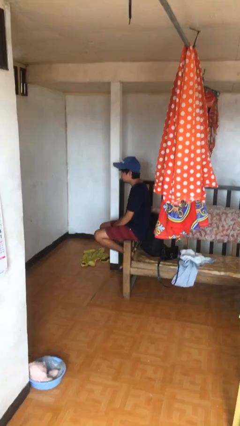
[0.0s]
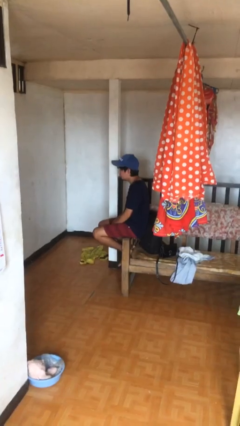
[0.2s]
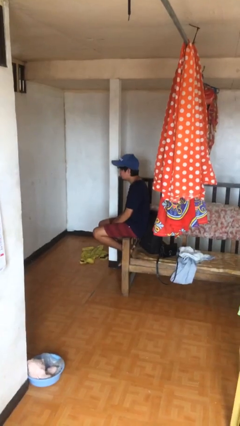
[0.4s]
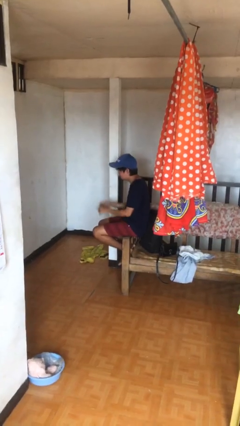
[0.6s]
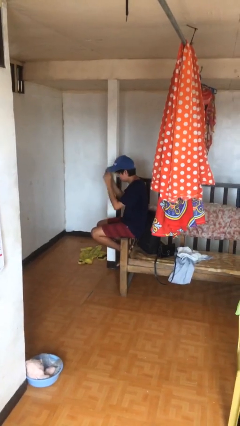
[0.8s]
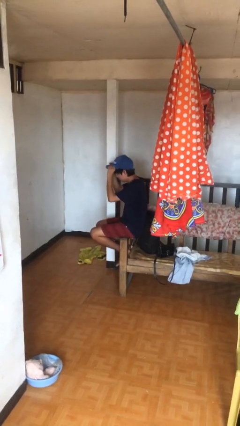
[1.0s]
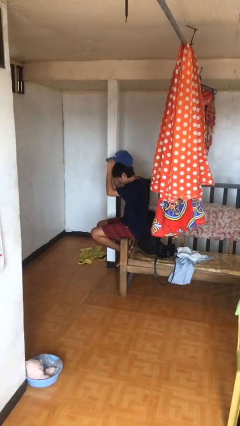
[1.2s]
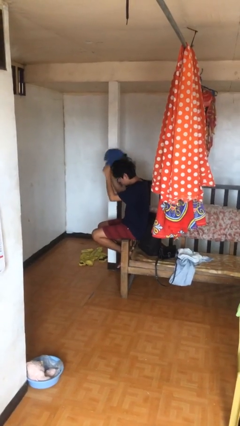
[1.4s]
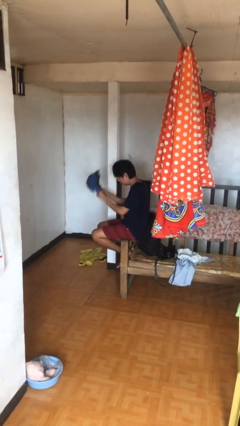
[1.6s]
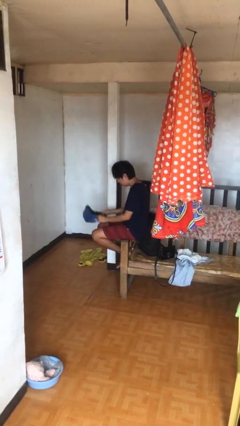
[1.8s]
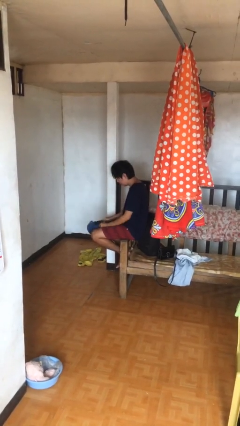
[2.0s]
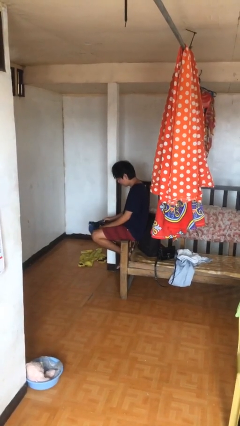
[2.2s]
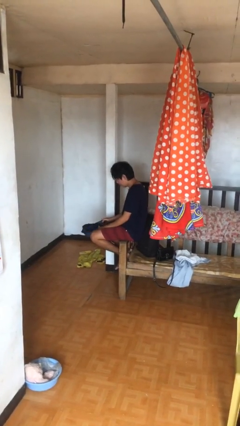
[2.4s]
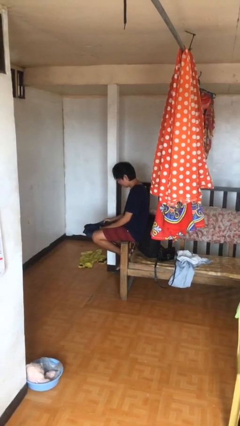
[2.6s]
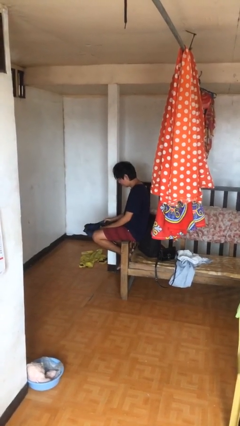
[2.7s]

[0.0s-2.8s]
person takes off hat

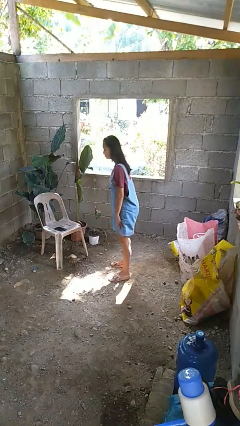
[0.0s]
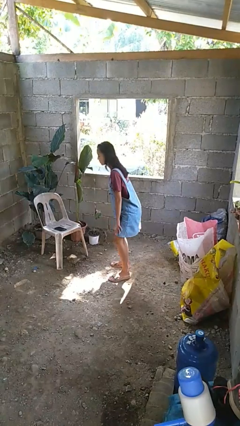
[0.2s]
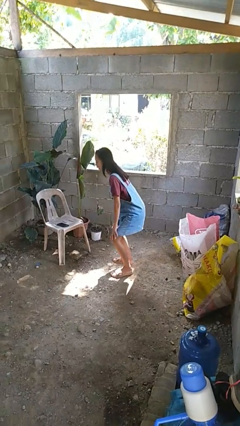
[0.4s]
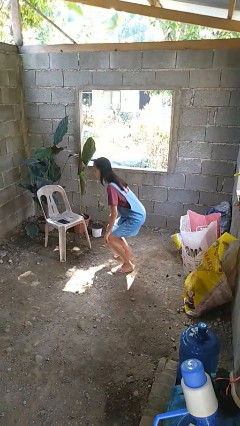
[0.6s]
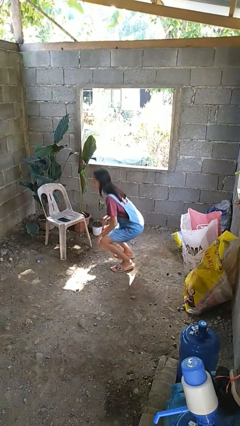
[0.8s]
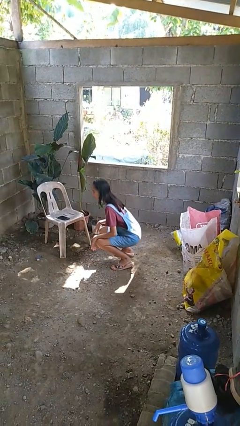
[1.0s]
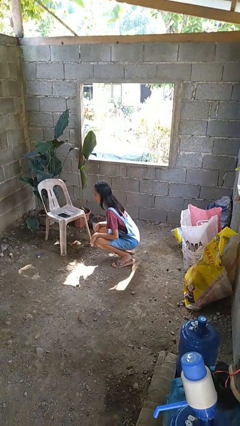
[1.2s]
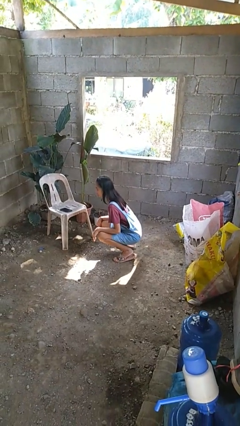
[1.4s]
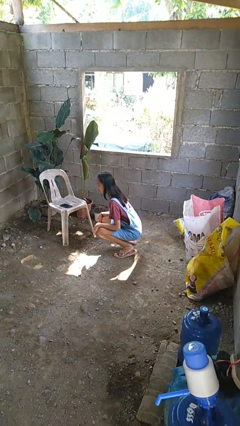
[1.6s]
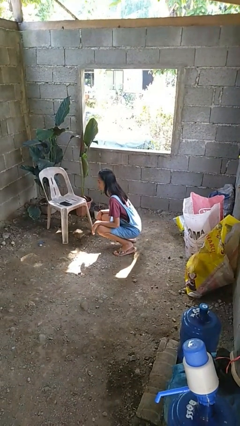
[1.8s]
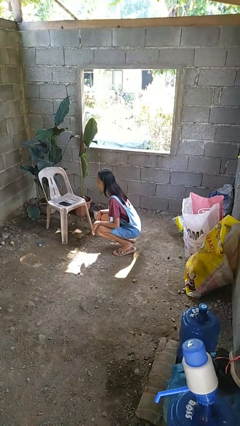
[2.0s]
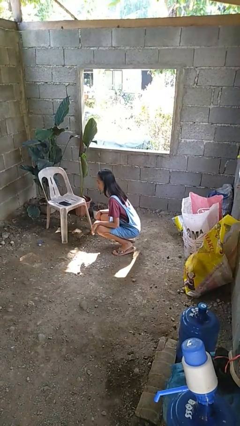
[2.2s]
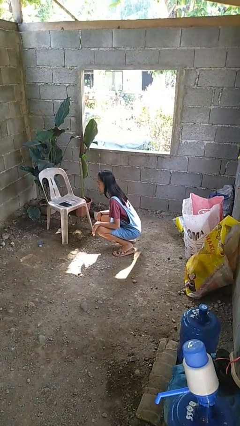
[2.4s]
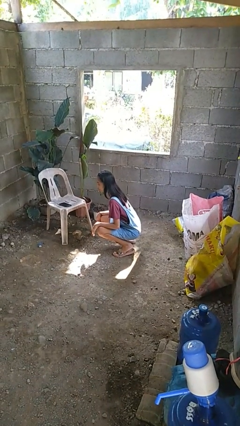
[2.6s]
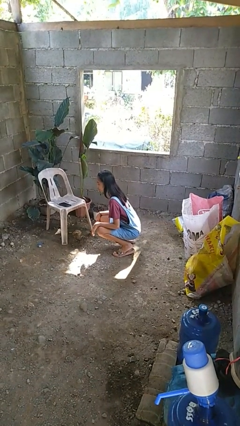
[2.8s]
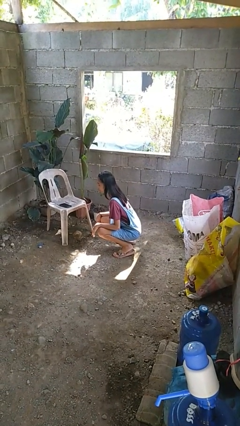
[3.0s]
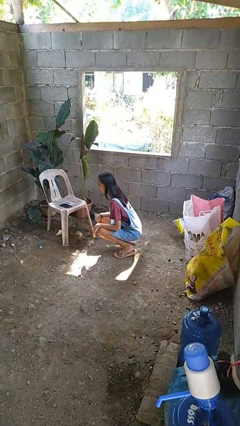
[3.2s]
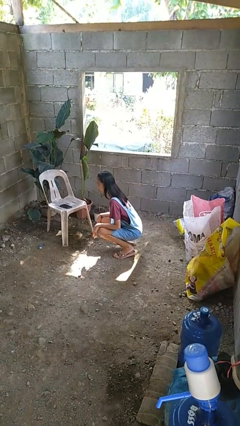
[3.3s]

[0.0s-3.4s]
person squats

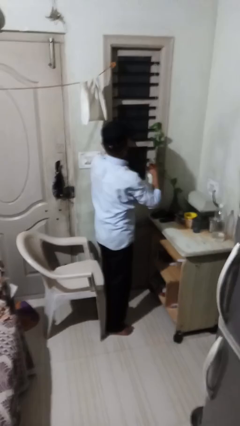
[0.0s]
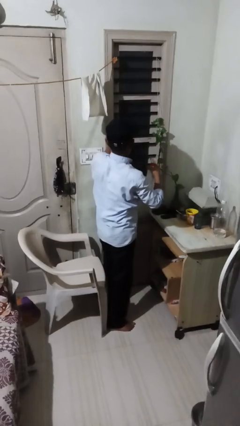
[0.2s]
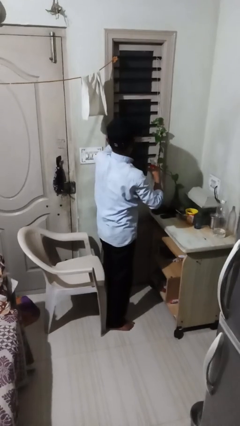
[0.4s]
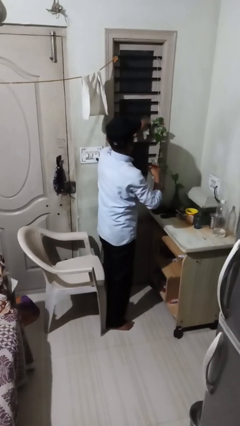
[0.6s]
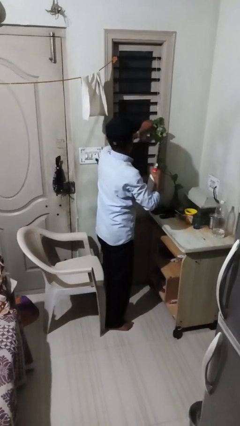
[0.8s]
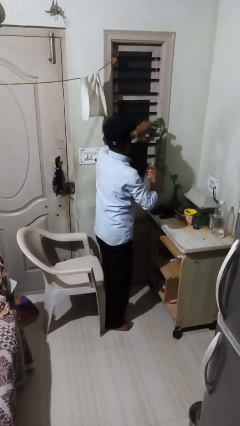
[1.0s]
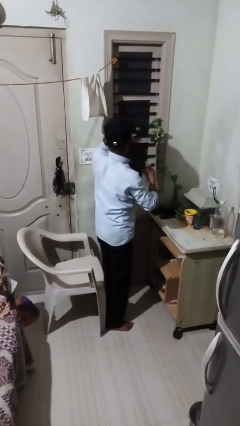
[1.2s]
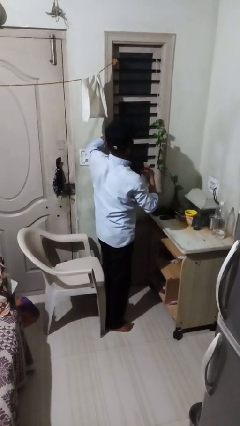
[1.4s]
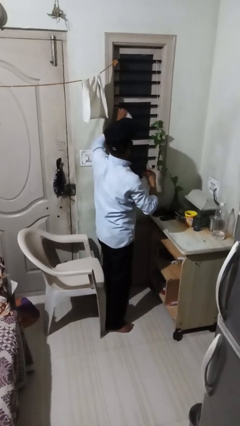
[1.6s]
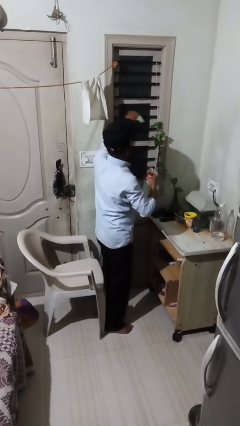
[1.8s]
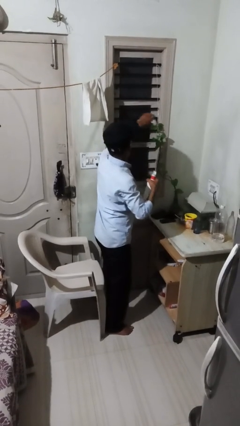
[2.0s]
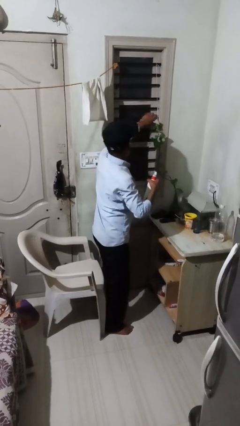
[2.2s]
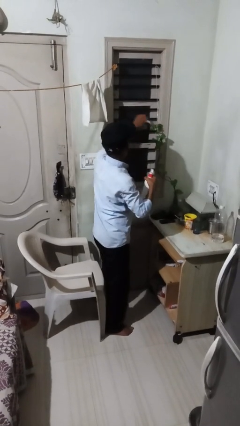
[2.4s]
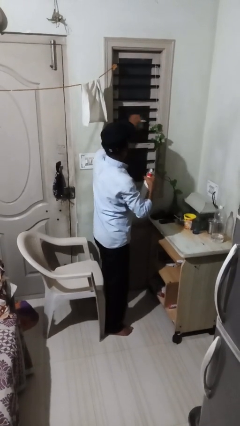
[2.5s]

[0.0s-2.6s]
person washes window

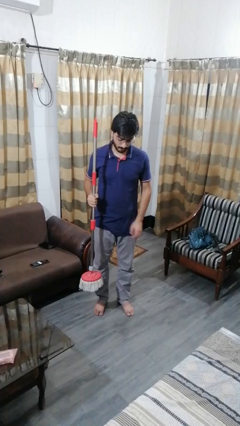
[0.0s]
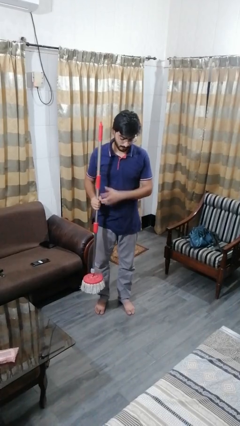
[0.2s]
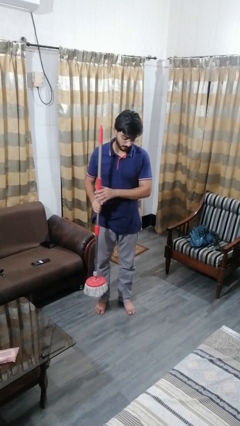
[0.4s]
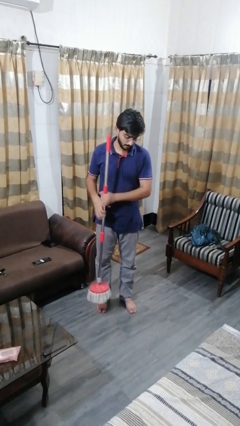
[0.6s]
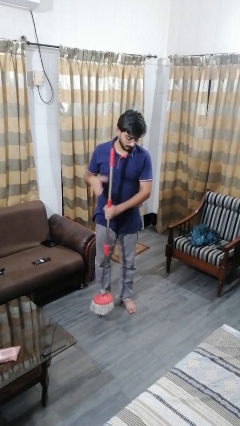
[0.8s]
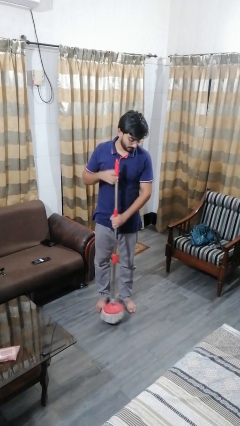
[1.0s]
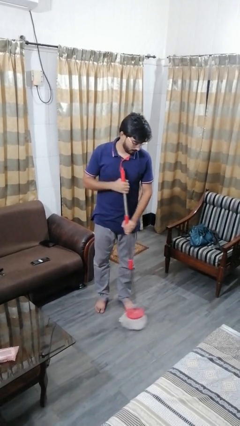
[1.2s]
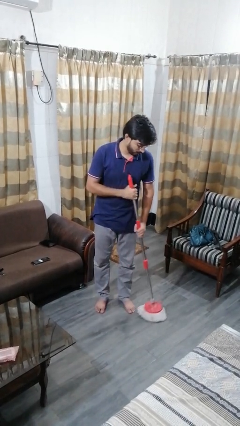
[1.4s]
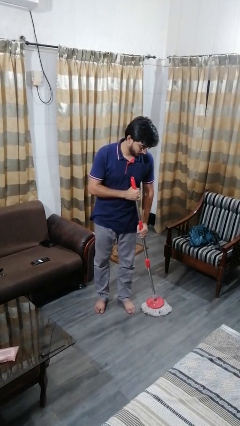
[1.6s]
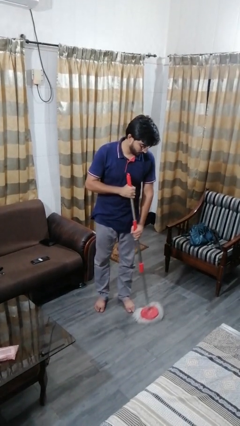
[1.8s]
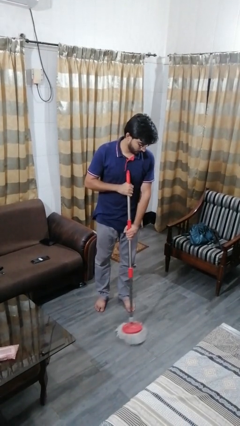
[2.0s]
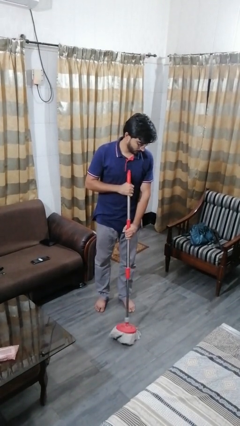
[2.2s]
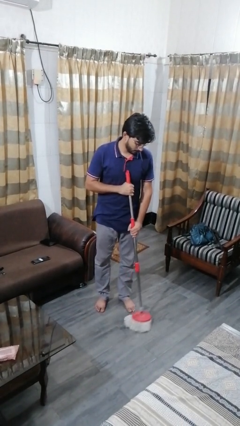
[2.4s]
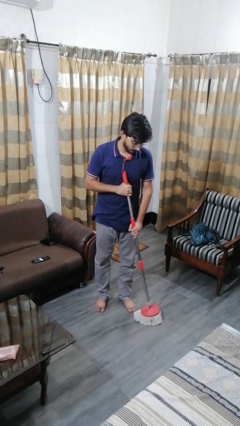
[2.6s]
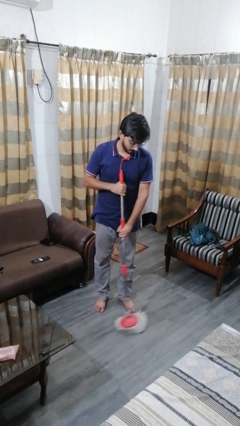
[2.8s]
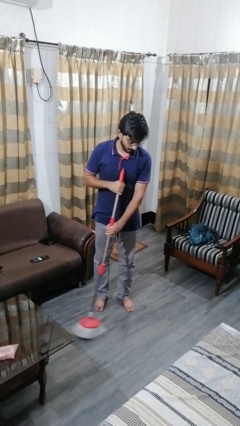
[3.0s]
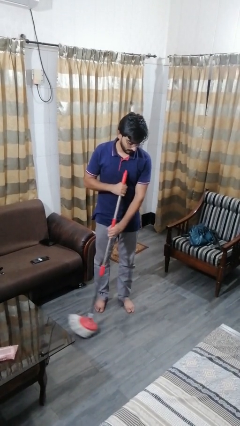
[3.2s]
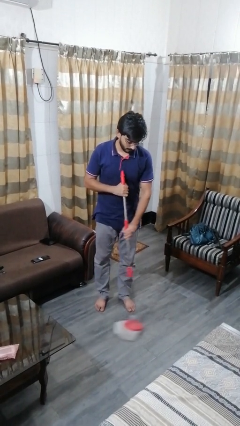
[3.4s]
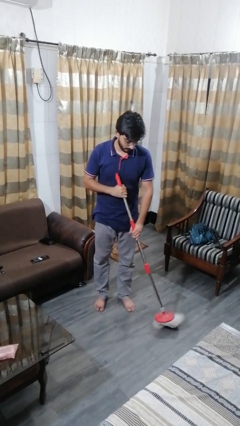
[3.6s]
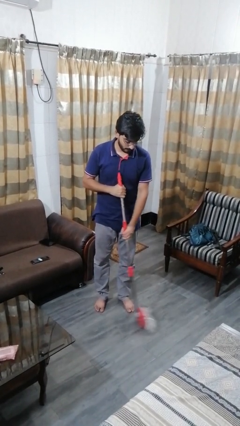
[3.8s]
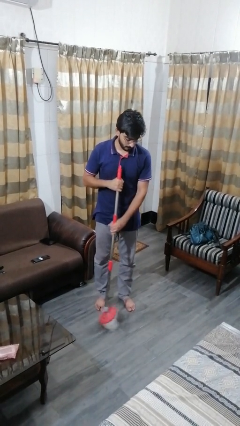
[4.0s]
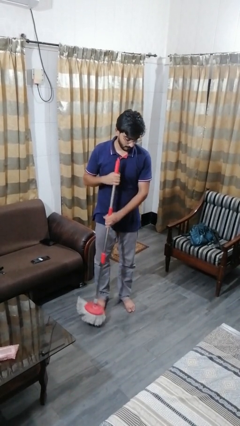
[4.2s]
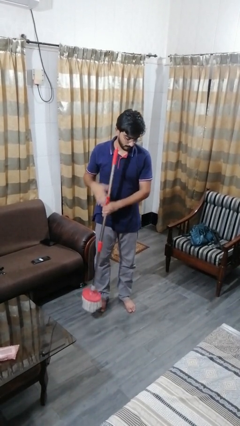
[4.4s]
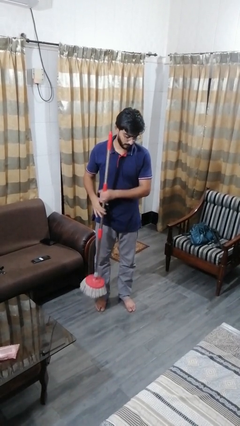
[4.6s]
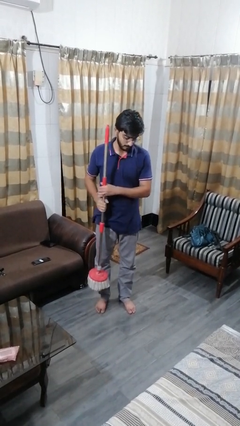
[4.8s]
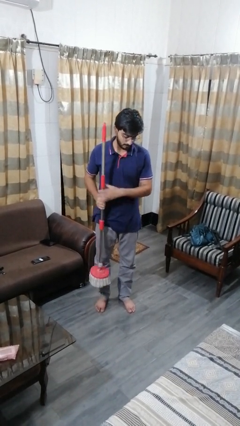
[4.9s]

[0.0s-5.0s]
person sweeps floor

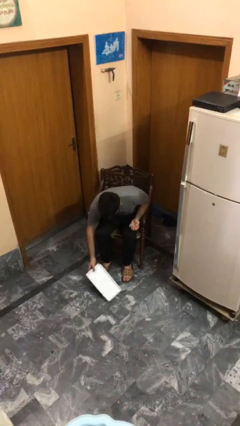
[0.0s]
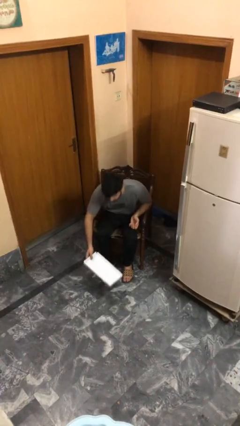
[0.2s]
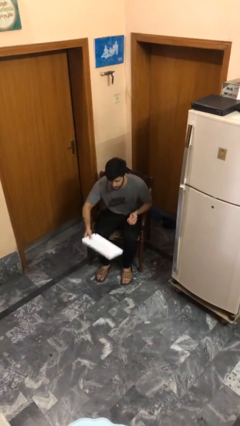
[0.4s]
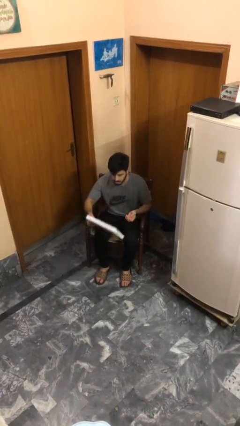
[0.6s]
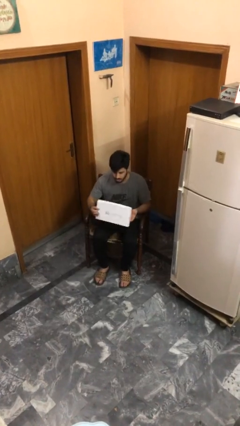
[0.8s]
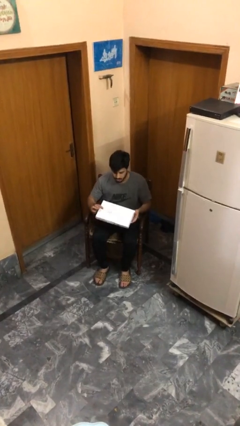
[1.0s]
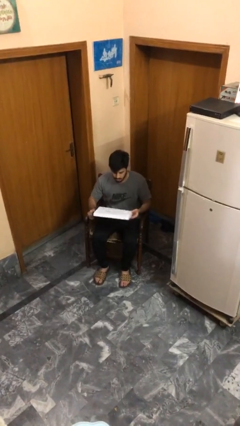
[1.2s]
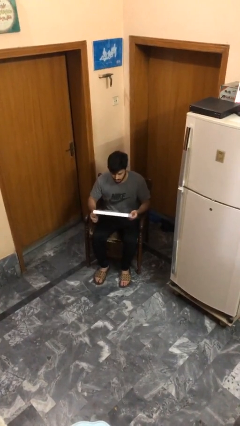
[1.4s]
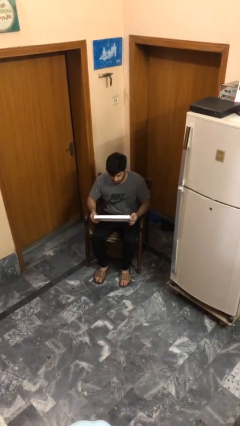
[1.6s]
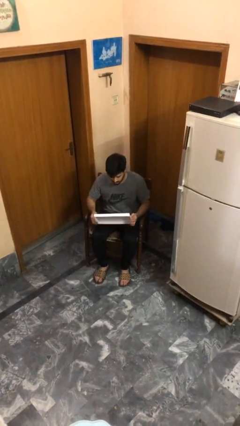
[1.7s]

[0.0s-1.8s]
person picks up object from floor

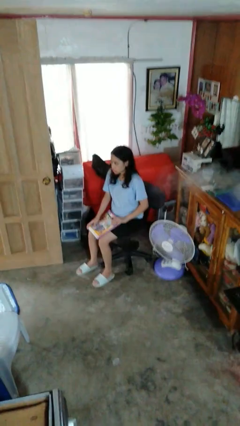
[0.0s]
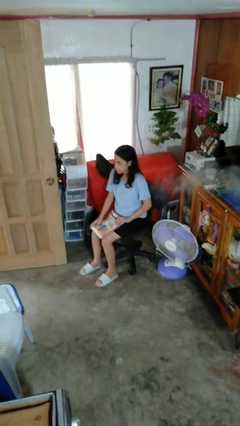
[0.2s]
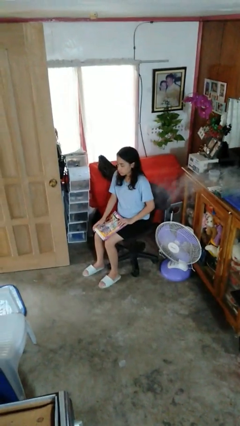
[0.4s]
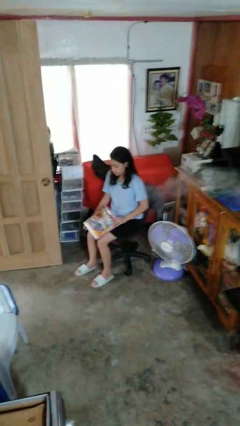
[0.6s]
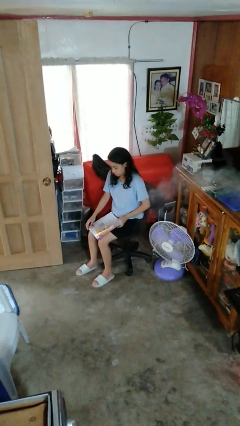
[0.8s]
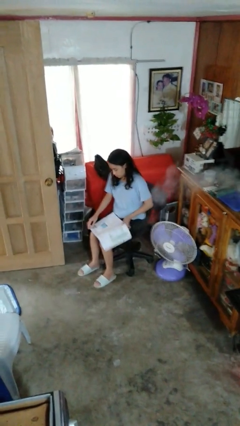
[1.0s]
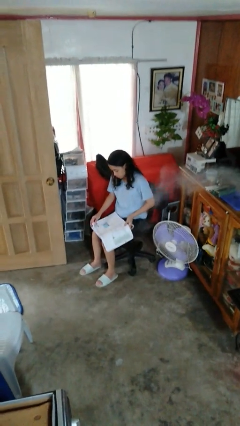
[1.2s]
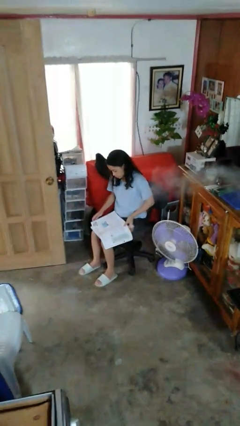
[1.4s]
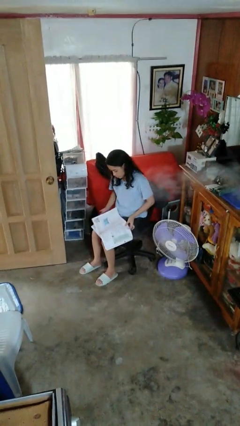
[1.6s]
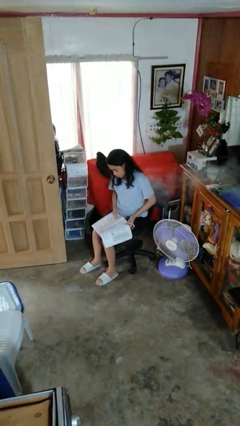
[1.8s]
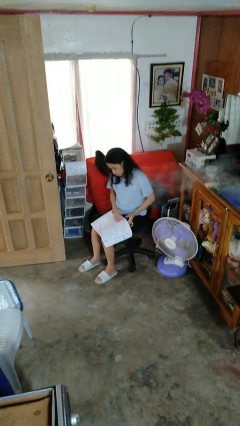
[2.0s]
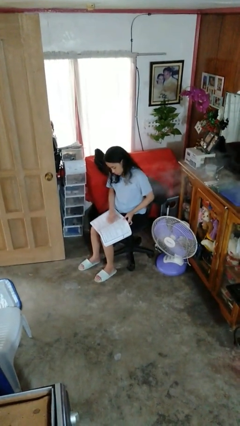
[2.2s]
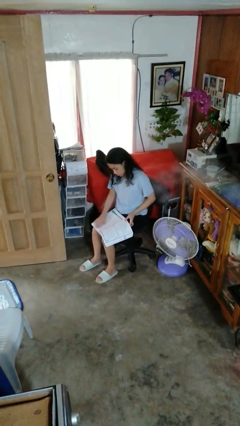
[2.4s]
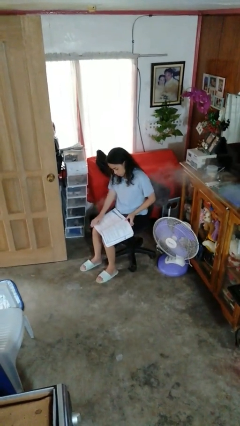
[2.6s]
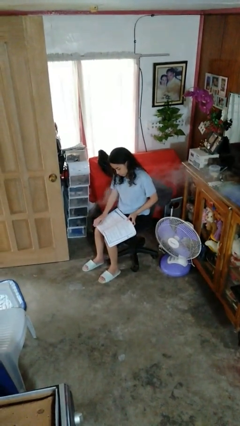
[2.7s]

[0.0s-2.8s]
person reads book
